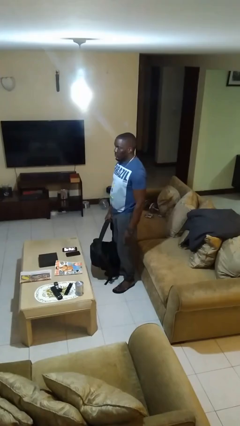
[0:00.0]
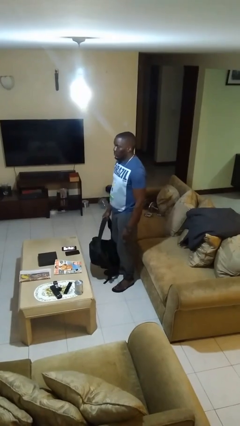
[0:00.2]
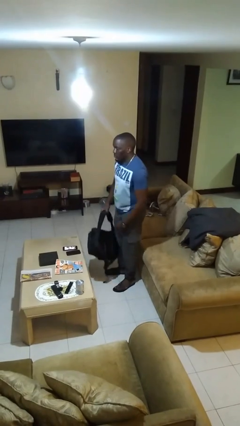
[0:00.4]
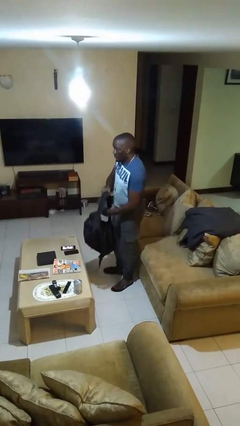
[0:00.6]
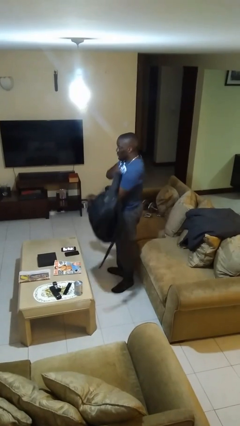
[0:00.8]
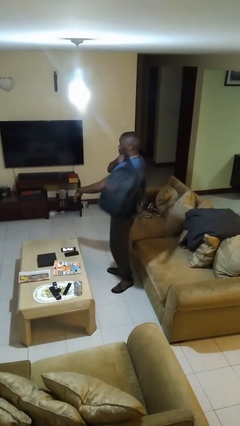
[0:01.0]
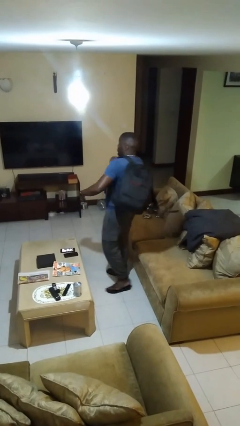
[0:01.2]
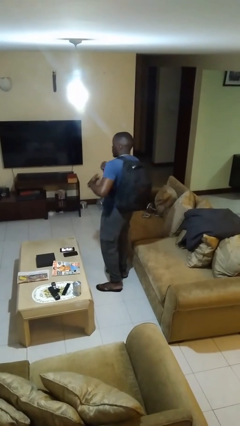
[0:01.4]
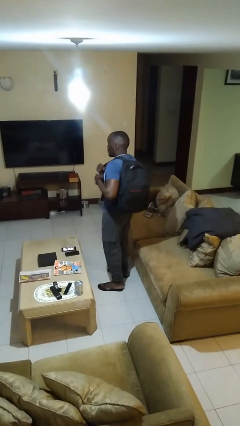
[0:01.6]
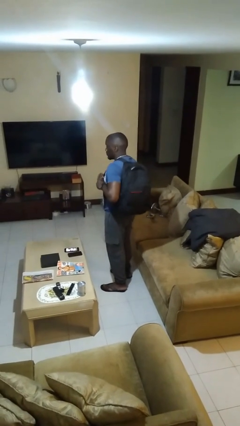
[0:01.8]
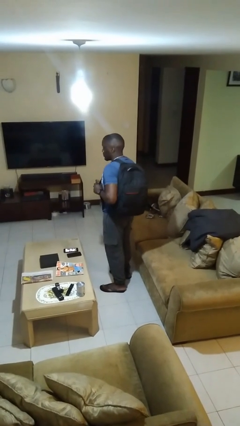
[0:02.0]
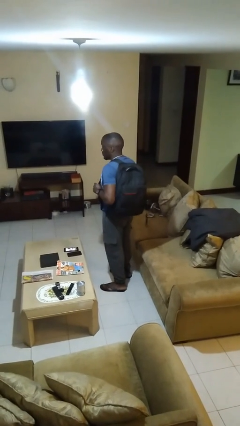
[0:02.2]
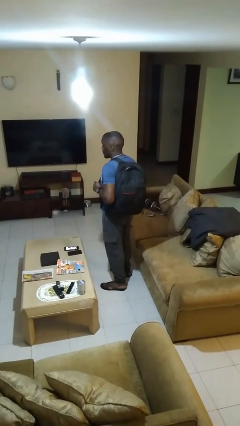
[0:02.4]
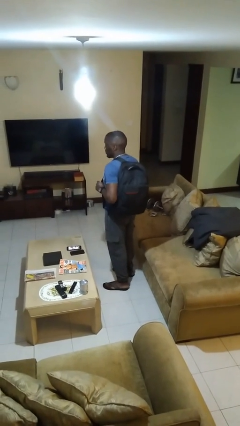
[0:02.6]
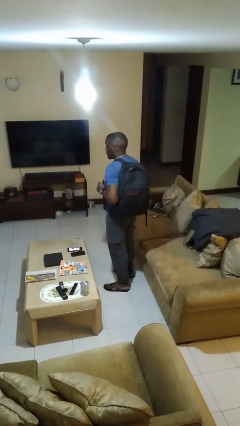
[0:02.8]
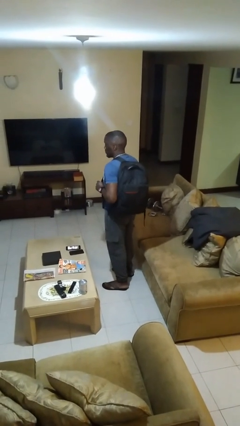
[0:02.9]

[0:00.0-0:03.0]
person puts on backpack

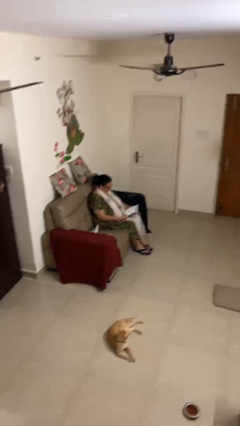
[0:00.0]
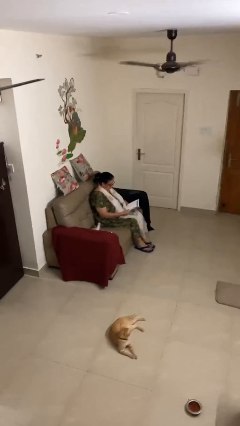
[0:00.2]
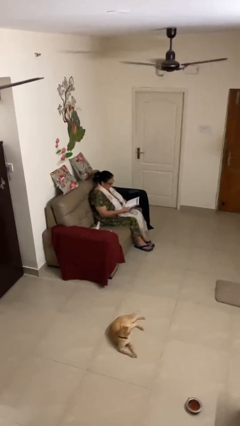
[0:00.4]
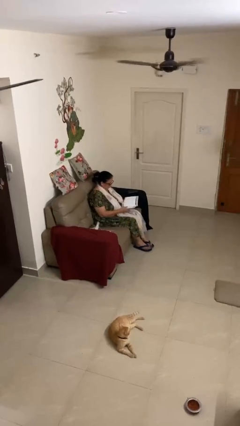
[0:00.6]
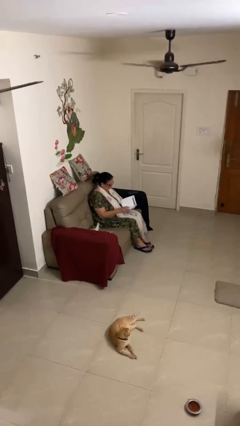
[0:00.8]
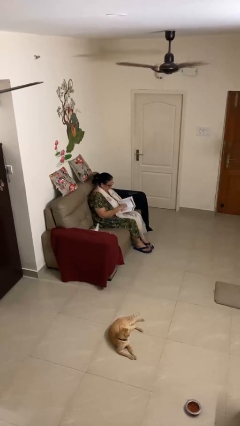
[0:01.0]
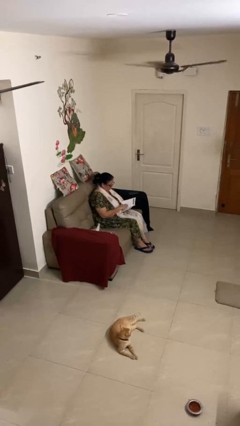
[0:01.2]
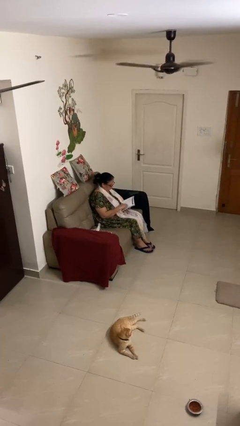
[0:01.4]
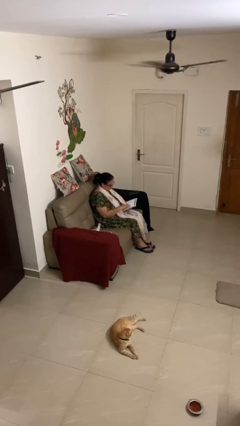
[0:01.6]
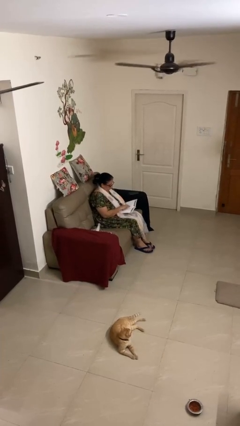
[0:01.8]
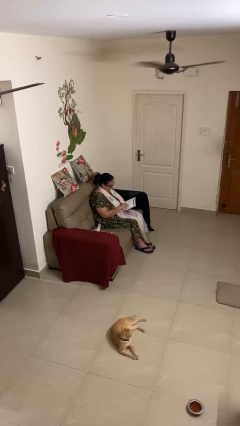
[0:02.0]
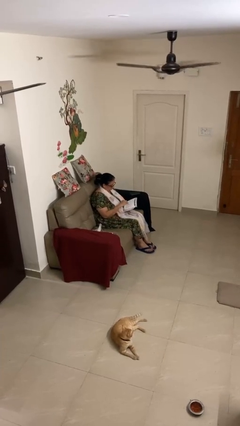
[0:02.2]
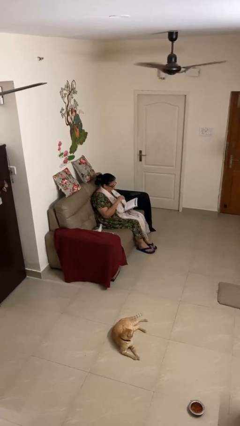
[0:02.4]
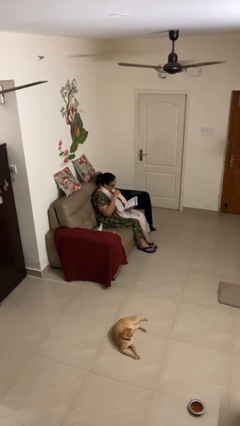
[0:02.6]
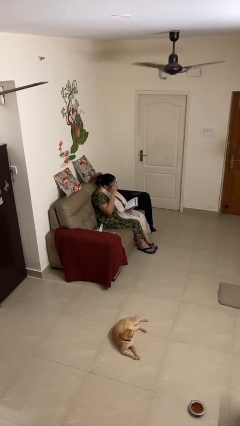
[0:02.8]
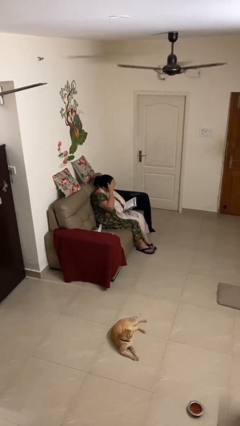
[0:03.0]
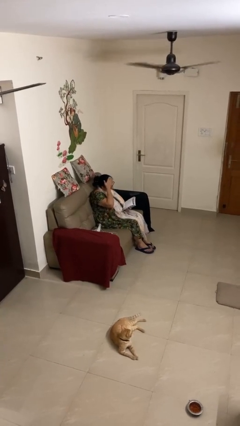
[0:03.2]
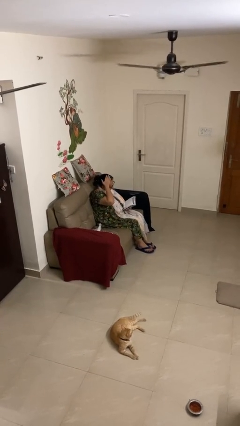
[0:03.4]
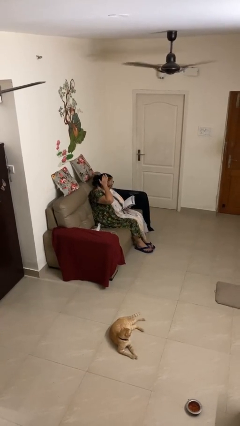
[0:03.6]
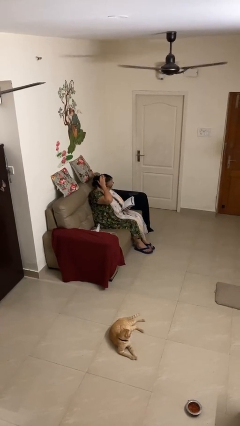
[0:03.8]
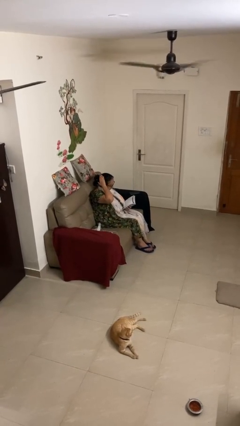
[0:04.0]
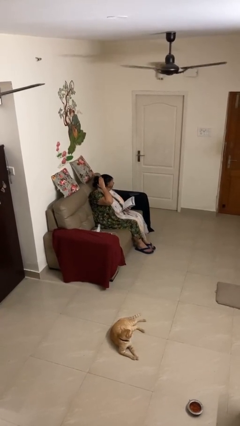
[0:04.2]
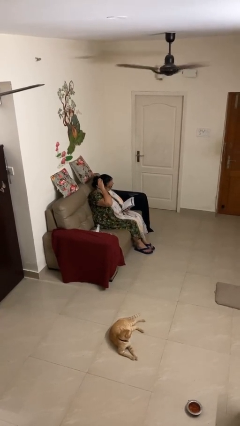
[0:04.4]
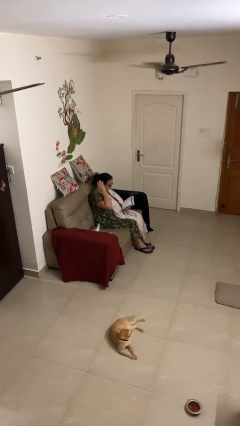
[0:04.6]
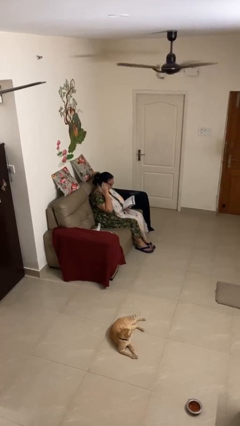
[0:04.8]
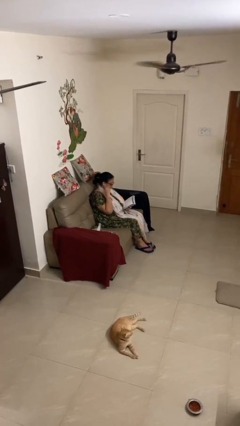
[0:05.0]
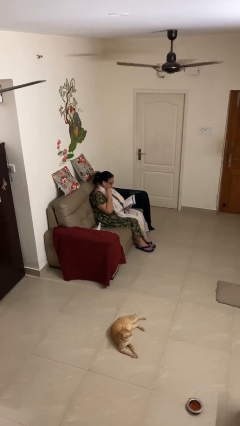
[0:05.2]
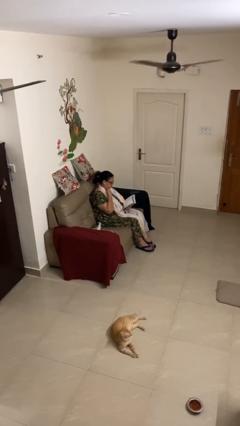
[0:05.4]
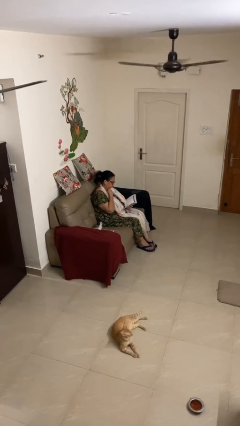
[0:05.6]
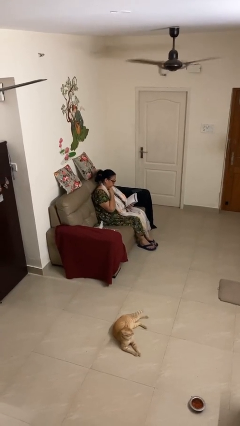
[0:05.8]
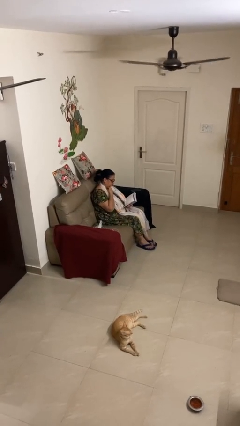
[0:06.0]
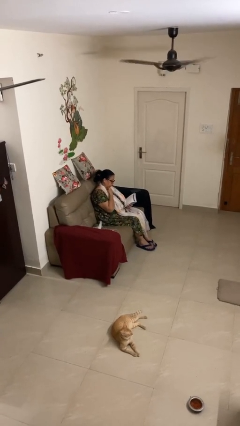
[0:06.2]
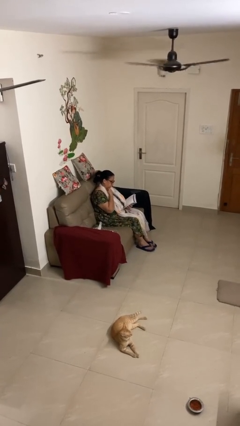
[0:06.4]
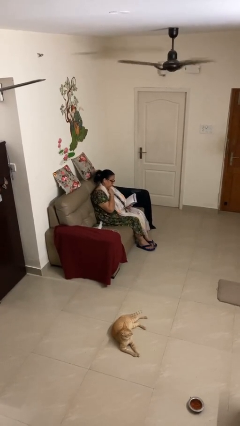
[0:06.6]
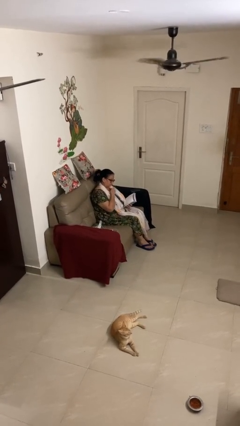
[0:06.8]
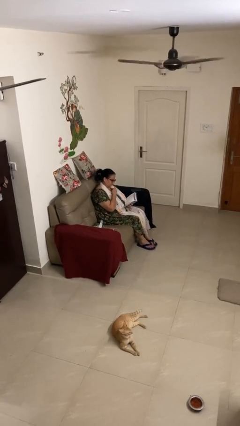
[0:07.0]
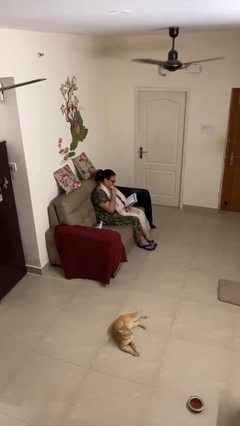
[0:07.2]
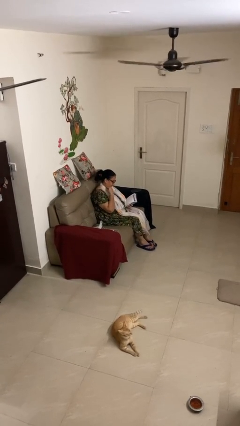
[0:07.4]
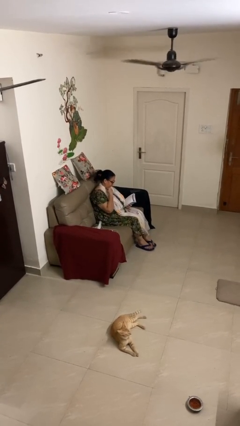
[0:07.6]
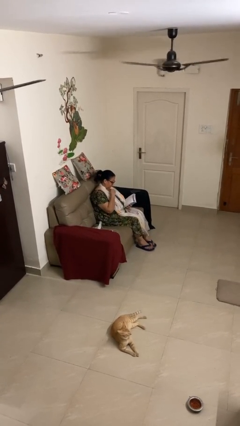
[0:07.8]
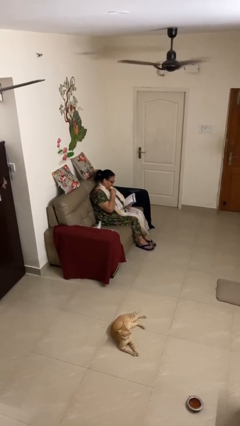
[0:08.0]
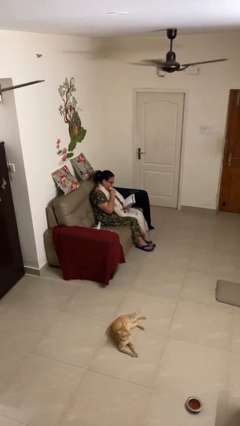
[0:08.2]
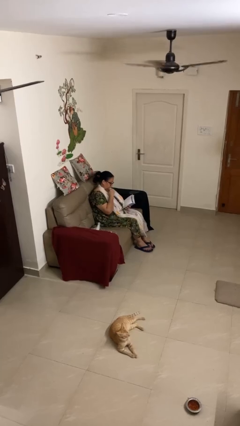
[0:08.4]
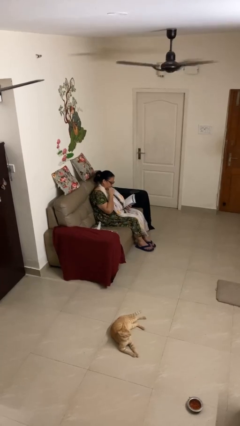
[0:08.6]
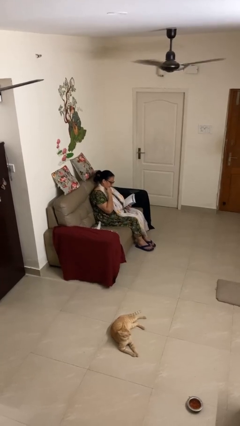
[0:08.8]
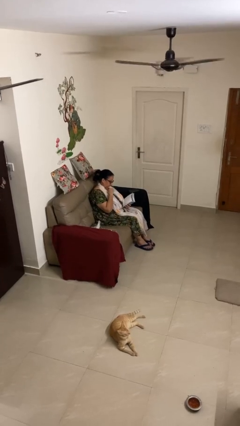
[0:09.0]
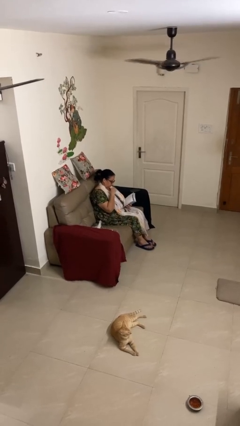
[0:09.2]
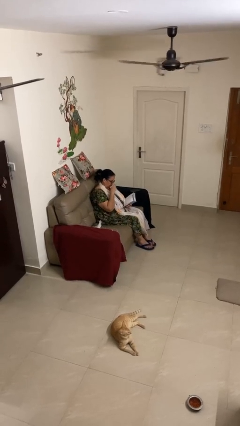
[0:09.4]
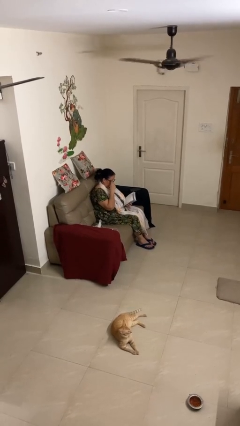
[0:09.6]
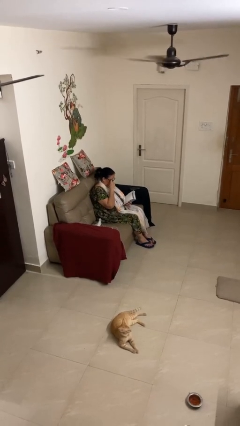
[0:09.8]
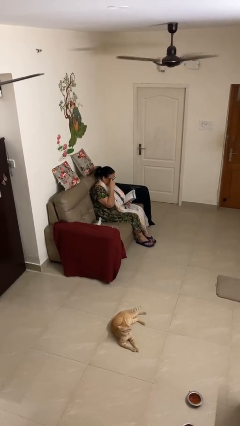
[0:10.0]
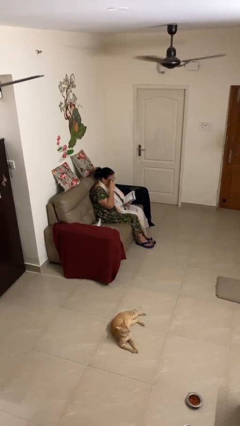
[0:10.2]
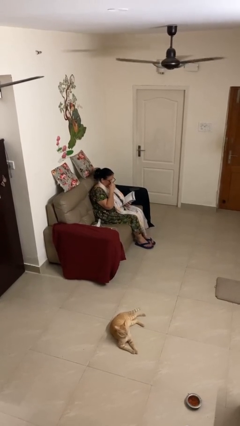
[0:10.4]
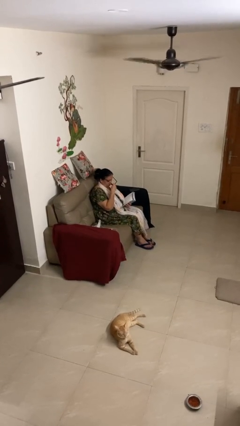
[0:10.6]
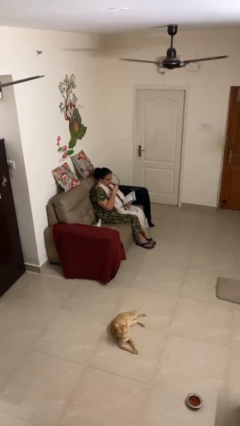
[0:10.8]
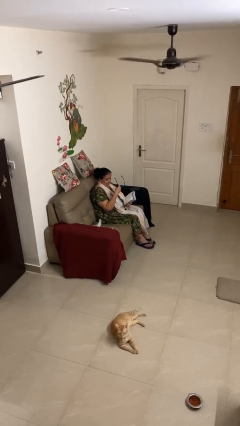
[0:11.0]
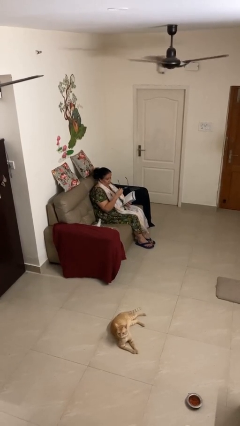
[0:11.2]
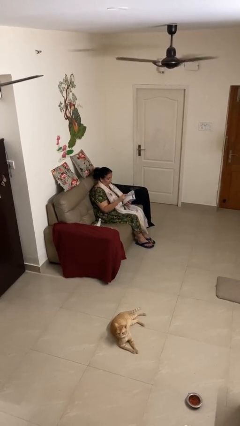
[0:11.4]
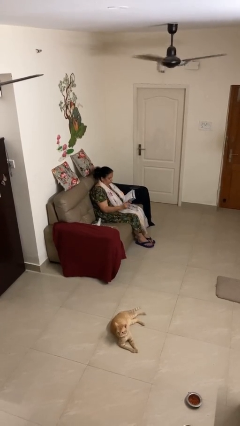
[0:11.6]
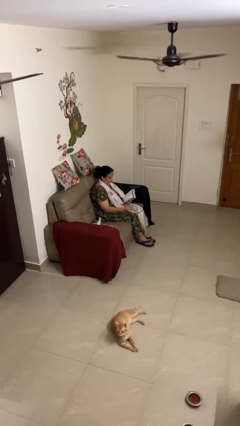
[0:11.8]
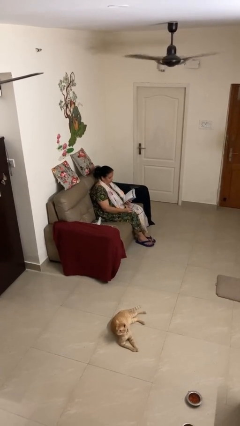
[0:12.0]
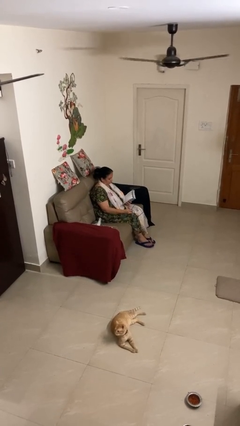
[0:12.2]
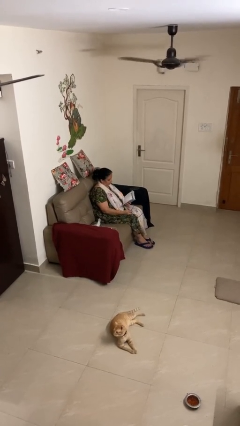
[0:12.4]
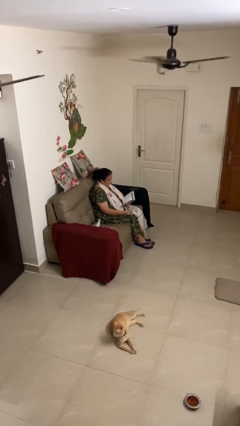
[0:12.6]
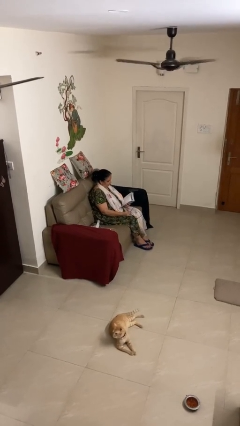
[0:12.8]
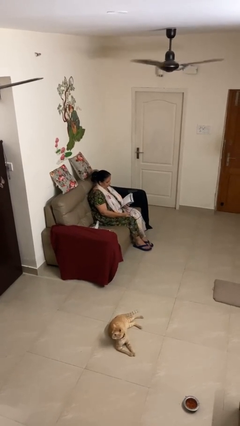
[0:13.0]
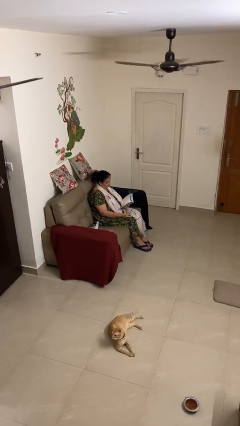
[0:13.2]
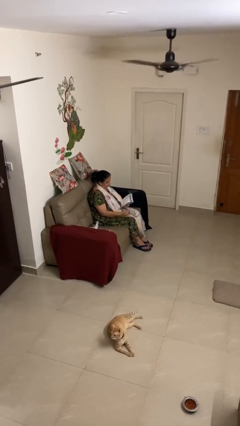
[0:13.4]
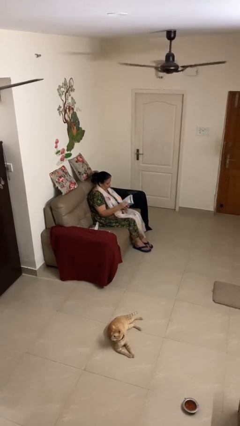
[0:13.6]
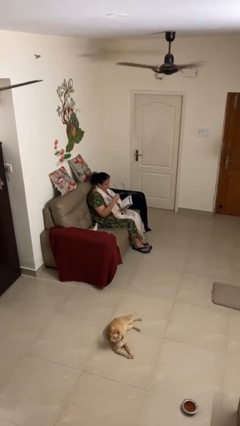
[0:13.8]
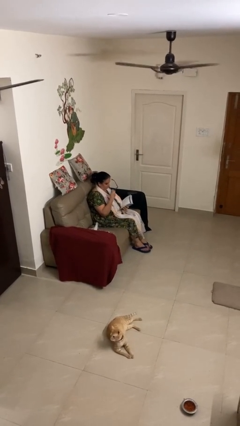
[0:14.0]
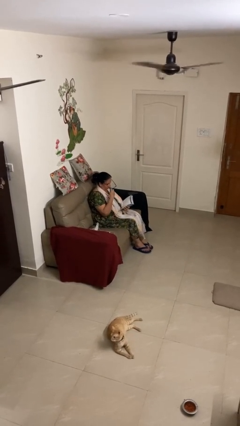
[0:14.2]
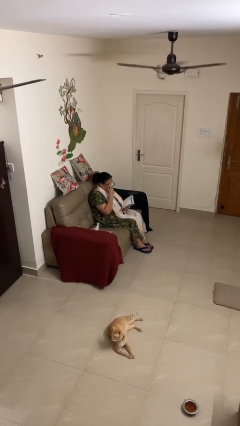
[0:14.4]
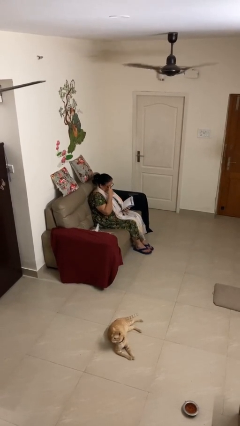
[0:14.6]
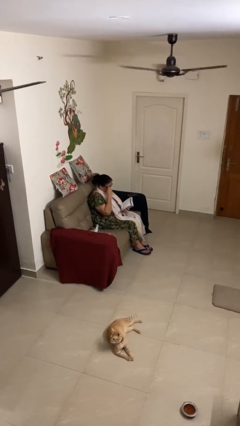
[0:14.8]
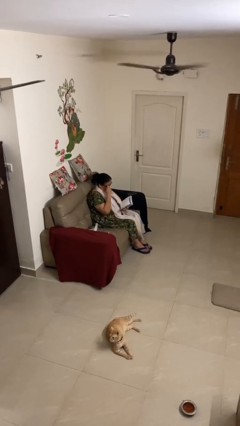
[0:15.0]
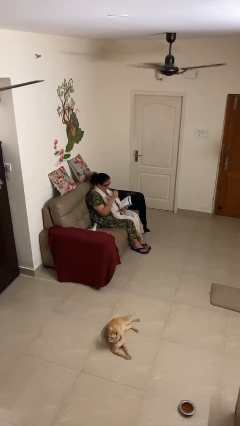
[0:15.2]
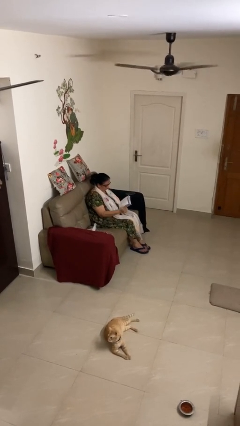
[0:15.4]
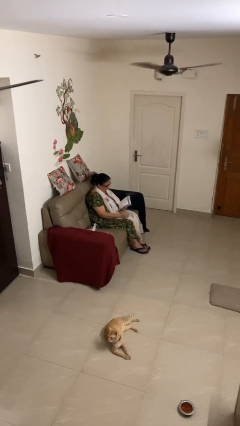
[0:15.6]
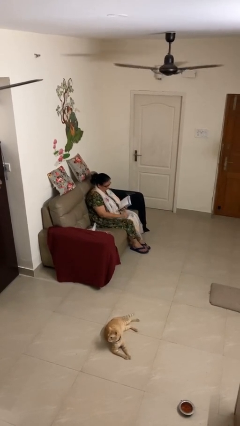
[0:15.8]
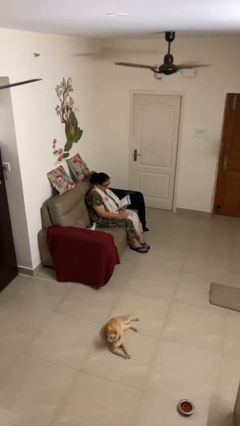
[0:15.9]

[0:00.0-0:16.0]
person reads document
